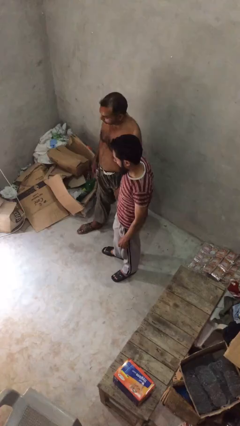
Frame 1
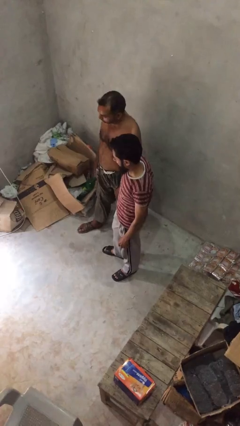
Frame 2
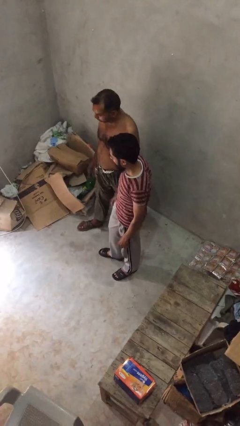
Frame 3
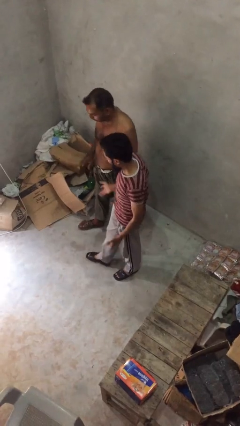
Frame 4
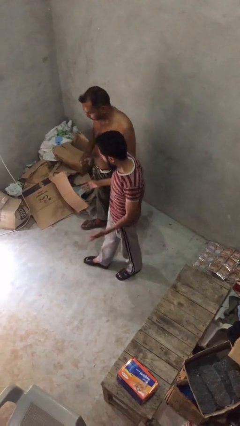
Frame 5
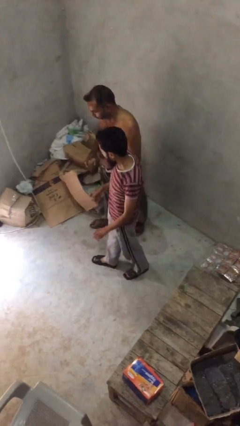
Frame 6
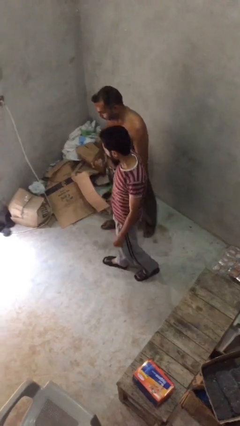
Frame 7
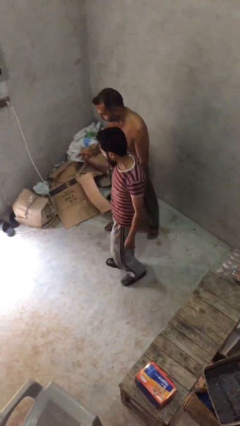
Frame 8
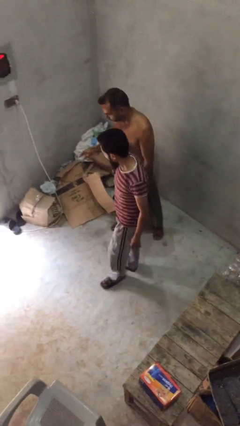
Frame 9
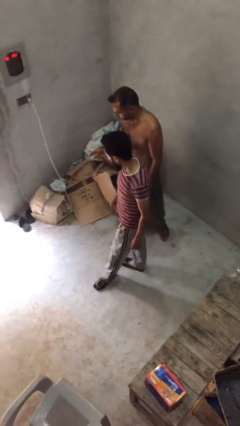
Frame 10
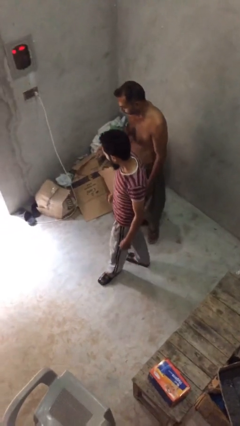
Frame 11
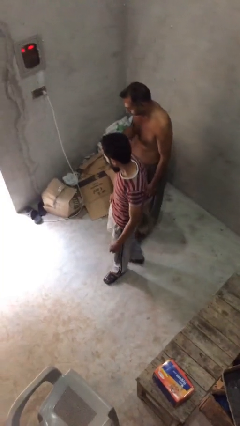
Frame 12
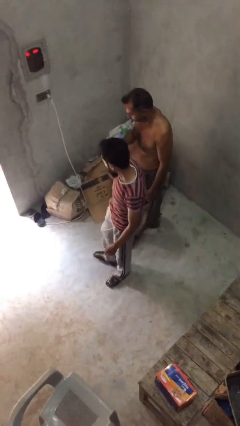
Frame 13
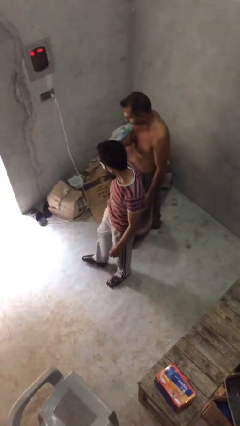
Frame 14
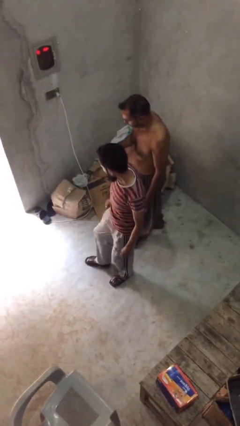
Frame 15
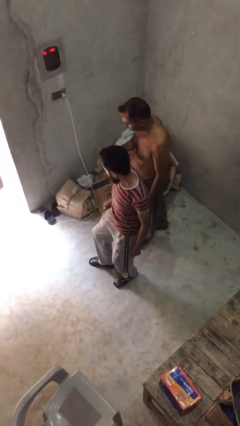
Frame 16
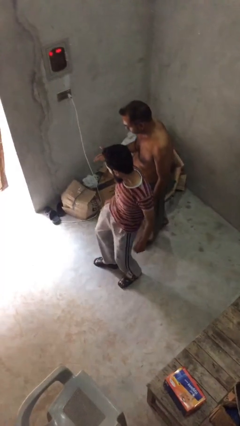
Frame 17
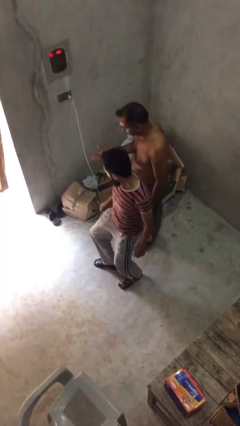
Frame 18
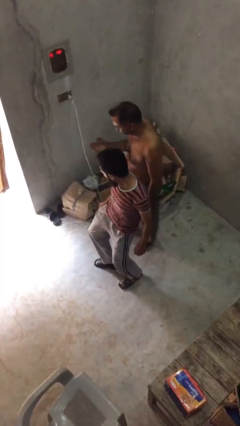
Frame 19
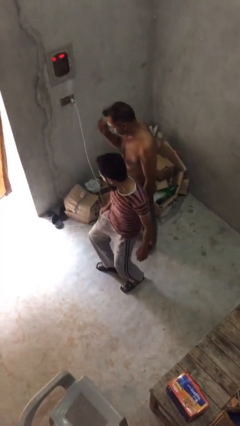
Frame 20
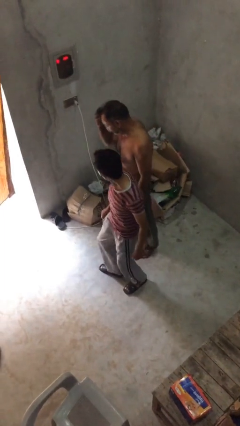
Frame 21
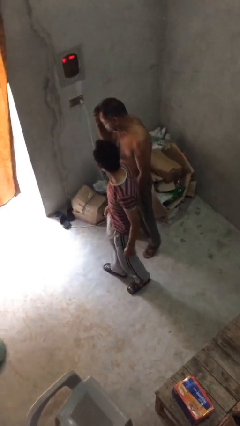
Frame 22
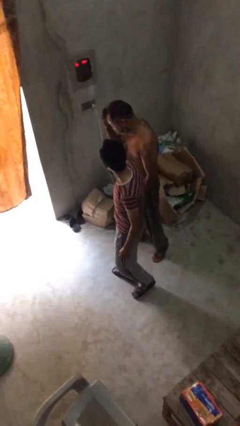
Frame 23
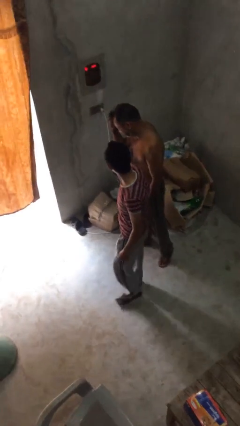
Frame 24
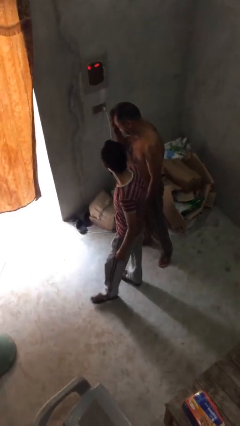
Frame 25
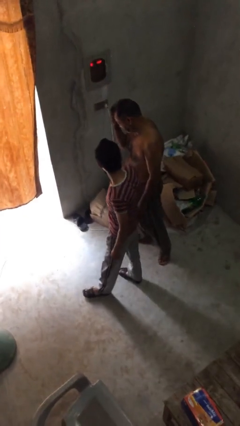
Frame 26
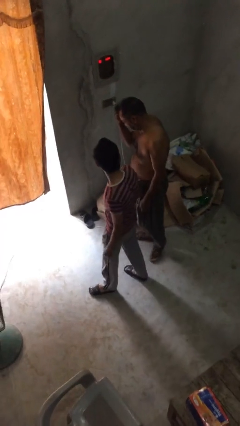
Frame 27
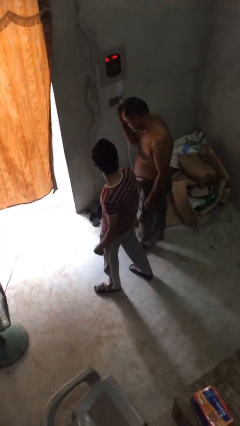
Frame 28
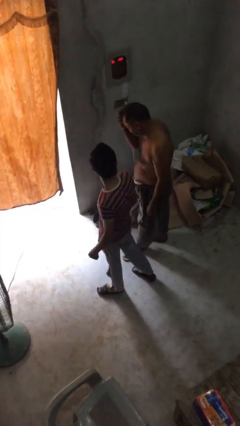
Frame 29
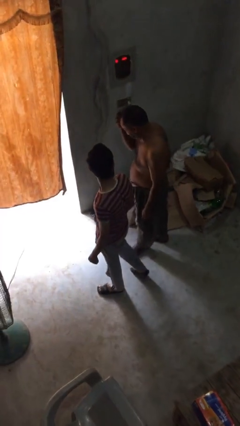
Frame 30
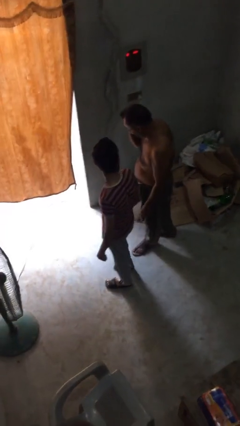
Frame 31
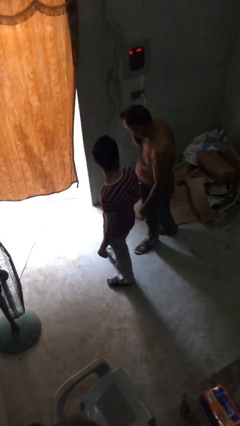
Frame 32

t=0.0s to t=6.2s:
person talks to person

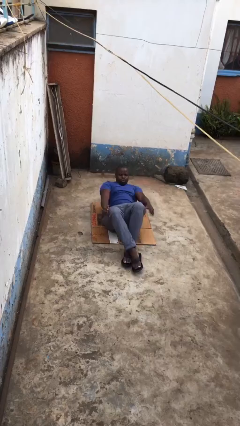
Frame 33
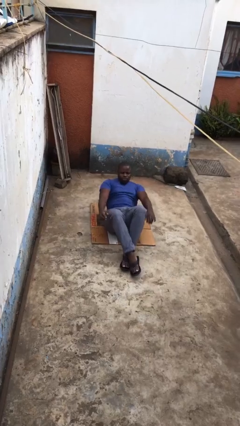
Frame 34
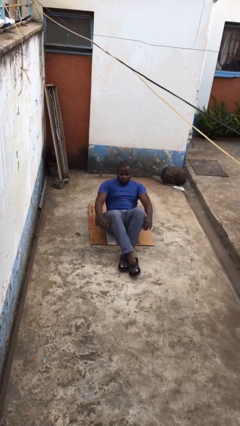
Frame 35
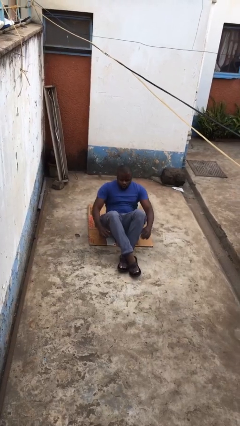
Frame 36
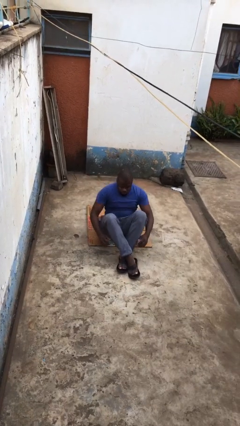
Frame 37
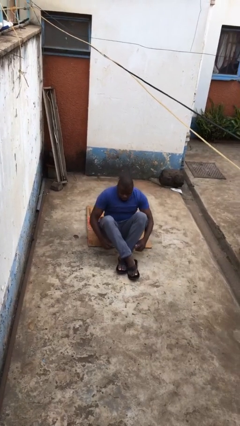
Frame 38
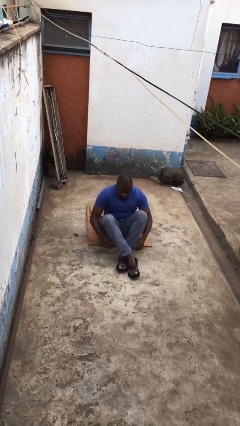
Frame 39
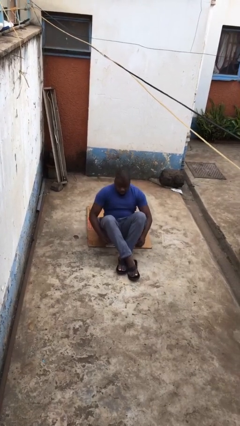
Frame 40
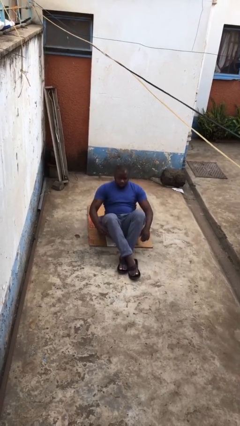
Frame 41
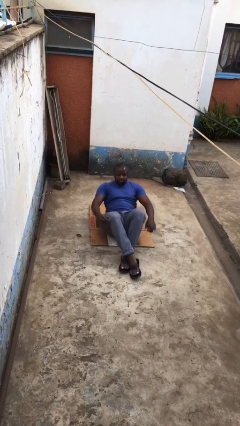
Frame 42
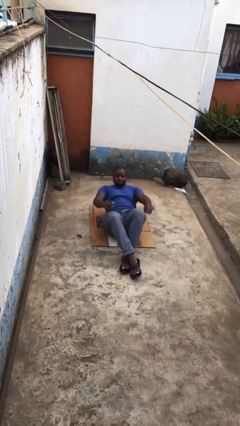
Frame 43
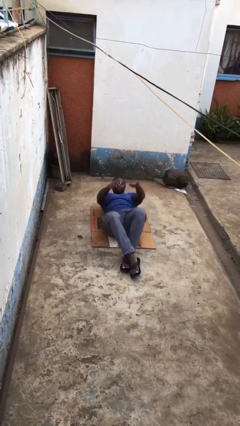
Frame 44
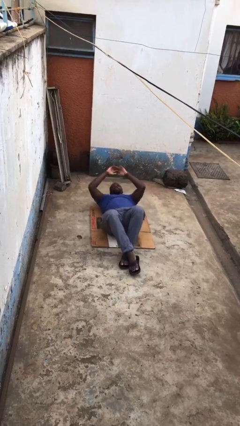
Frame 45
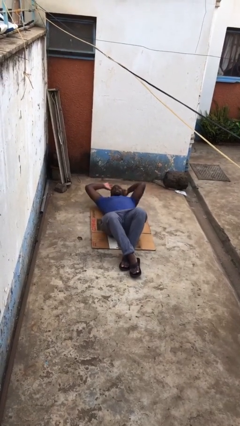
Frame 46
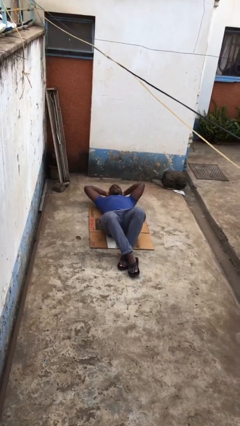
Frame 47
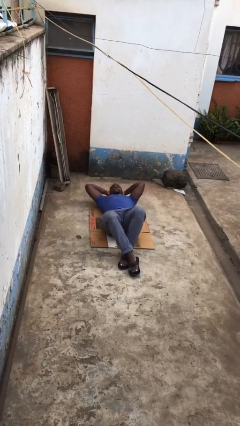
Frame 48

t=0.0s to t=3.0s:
person exercises with situp

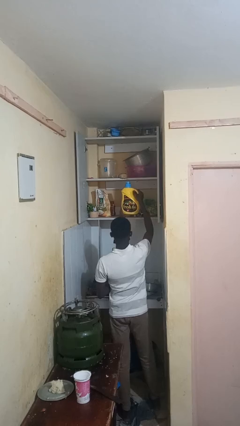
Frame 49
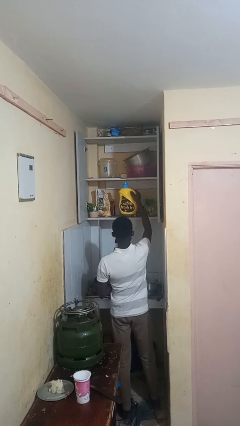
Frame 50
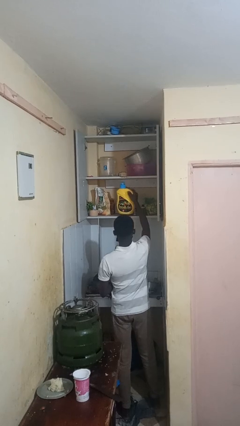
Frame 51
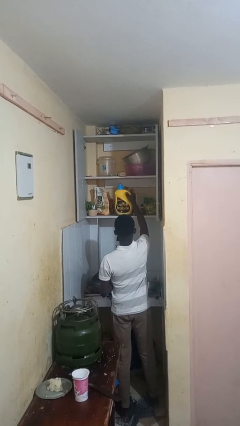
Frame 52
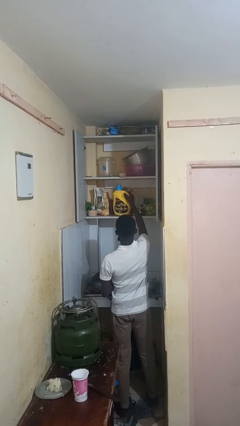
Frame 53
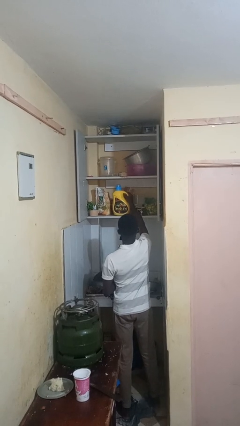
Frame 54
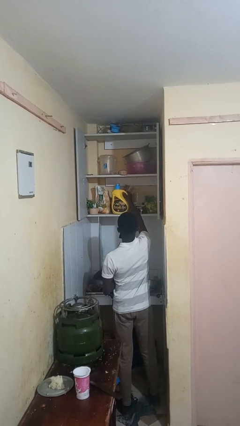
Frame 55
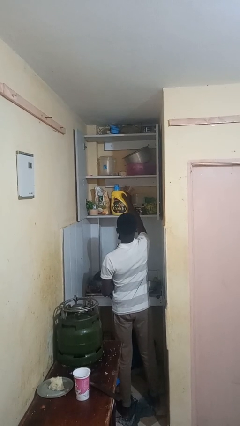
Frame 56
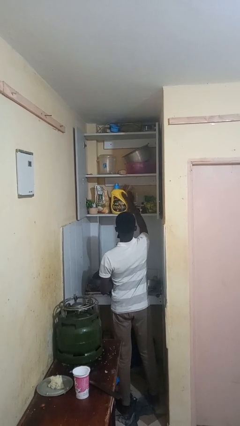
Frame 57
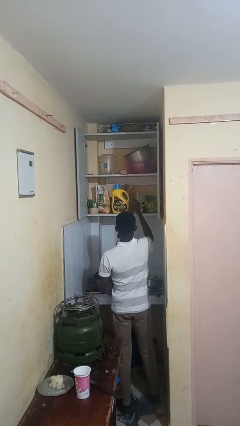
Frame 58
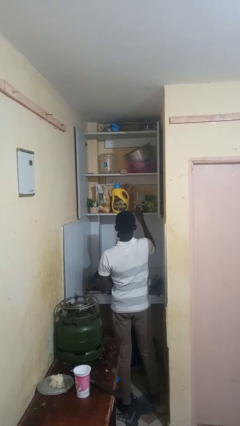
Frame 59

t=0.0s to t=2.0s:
person puts down object on countertop

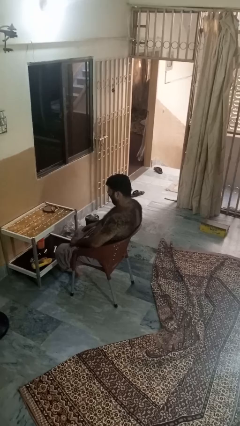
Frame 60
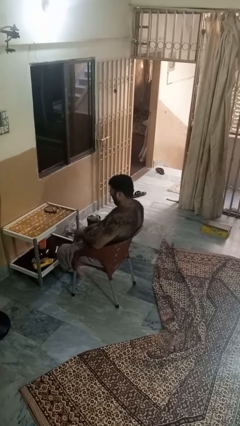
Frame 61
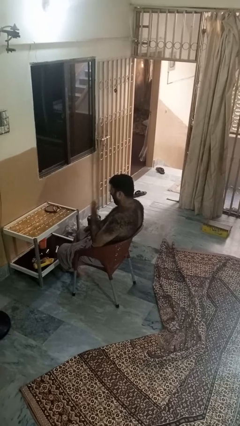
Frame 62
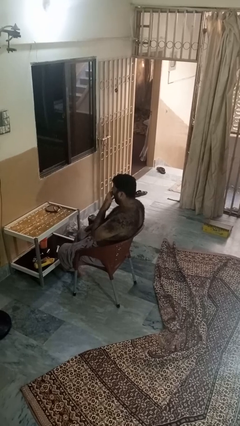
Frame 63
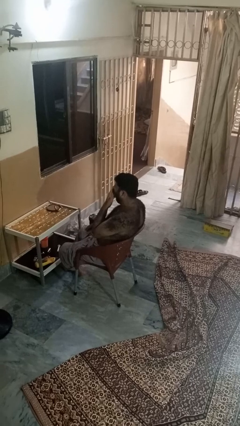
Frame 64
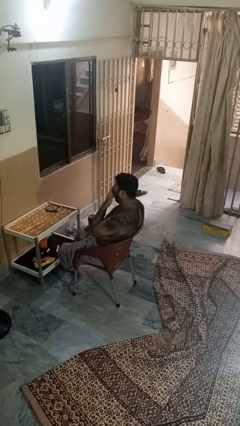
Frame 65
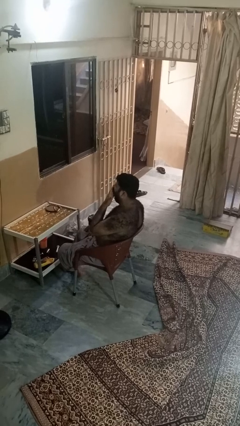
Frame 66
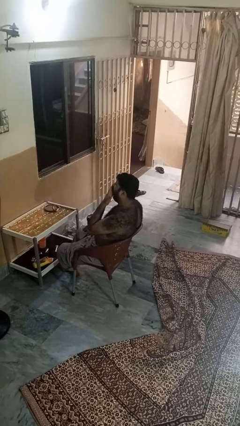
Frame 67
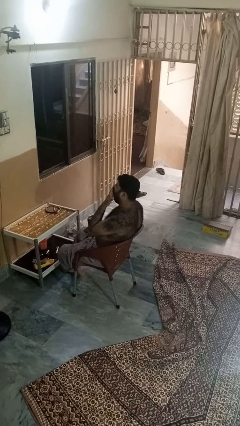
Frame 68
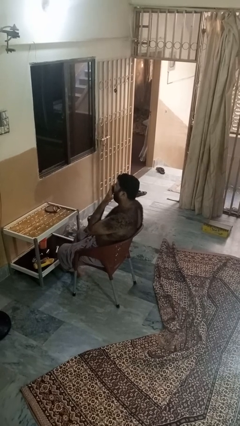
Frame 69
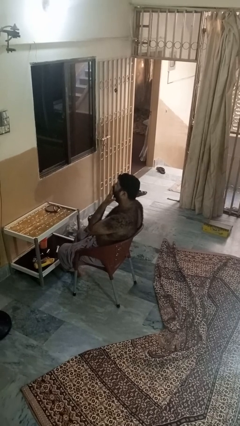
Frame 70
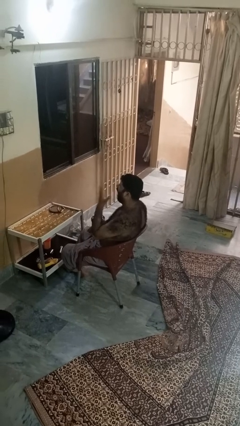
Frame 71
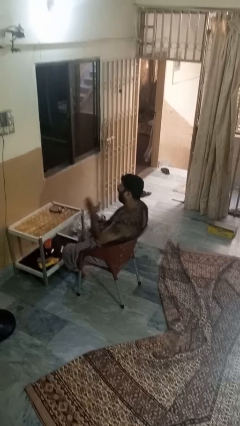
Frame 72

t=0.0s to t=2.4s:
person yawns

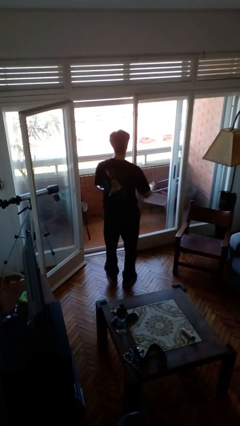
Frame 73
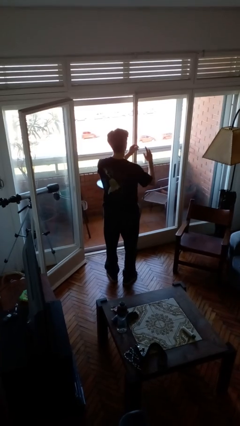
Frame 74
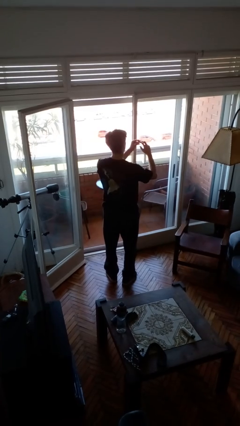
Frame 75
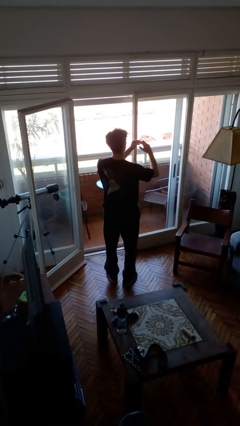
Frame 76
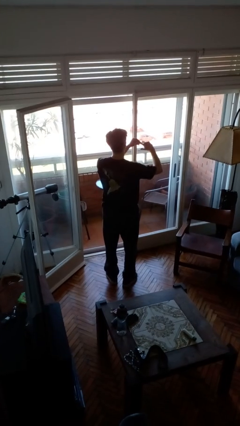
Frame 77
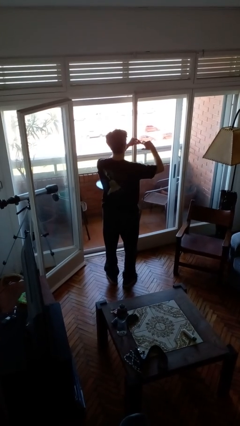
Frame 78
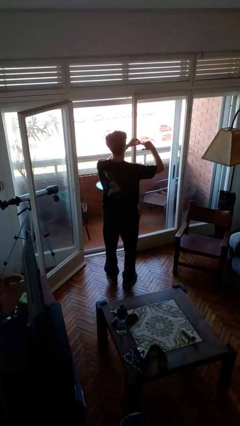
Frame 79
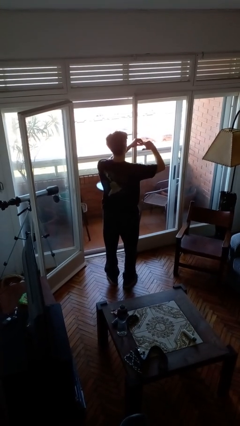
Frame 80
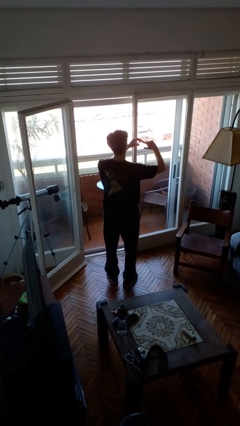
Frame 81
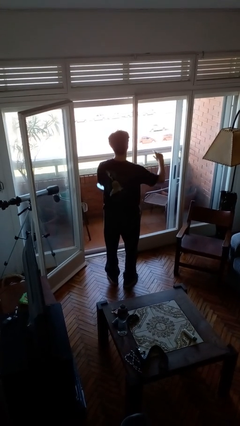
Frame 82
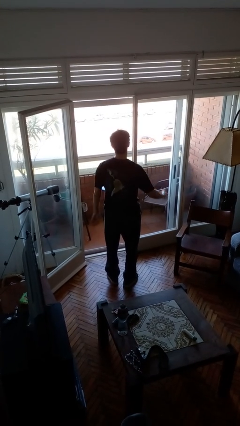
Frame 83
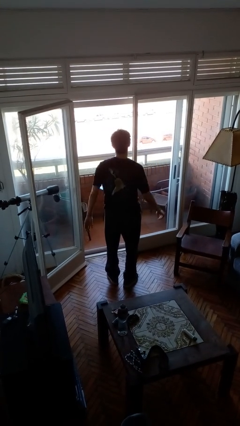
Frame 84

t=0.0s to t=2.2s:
person puts on ring

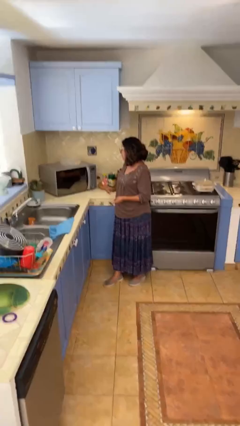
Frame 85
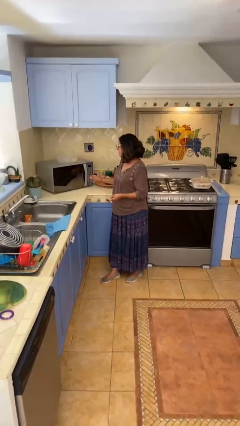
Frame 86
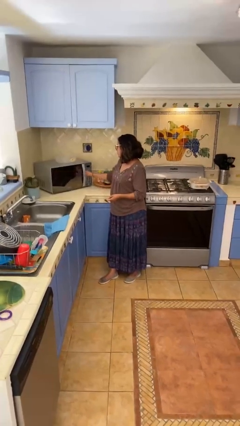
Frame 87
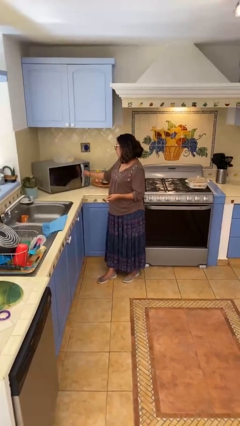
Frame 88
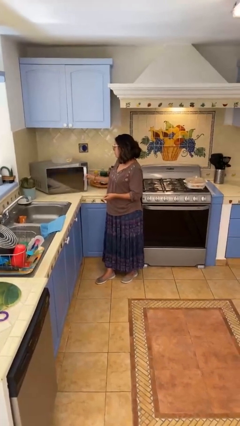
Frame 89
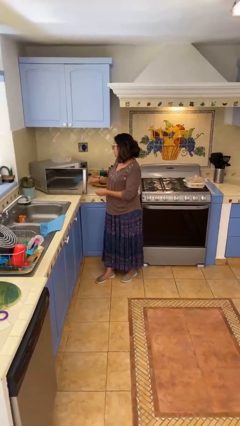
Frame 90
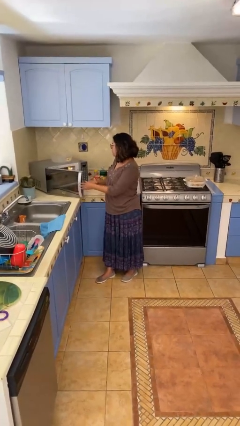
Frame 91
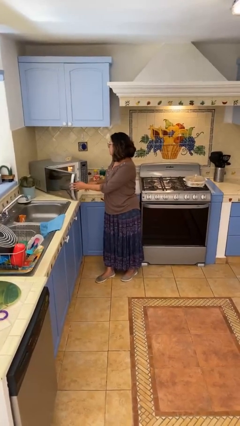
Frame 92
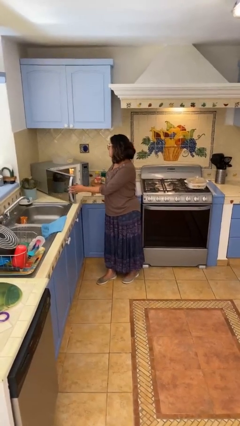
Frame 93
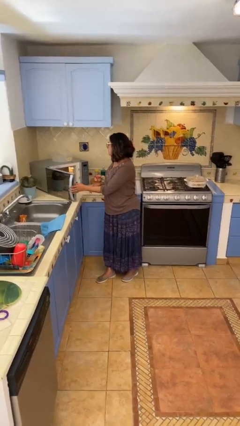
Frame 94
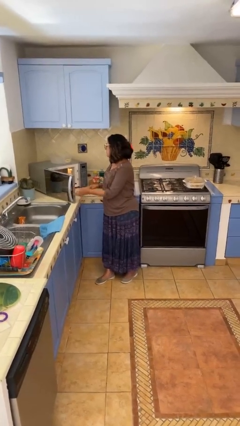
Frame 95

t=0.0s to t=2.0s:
person opens microwave
